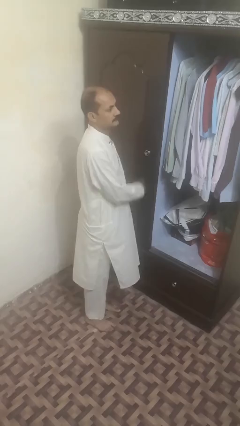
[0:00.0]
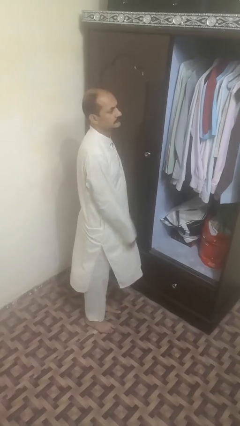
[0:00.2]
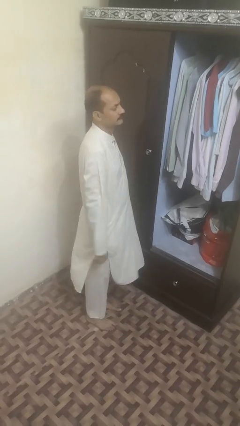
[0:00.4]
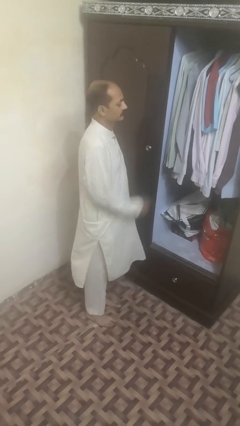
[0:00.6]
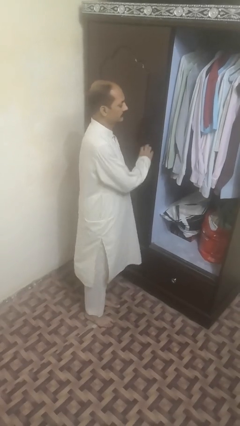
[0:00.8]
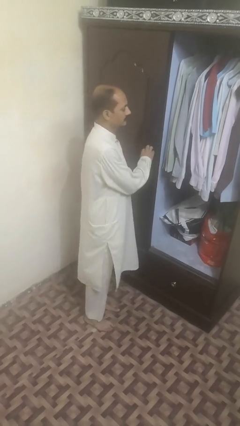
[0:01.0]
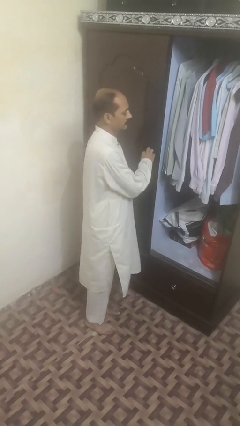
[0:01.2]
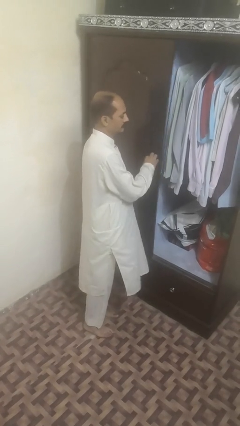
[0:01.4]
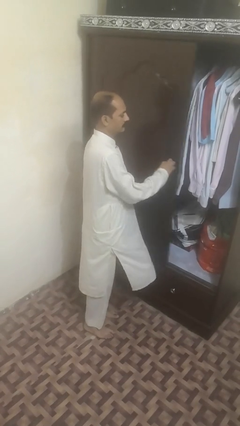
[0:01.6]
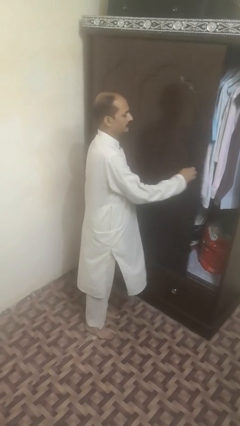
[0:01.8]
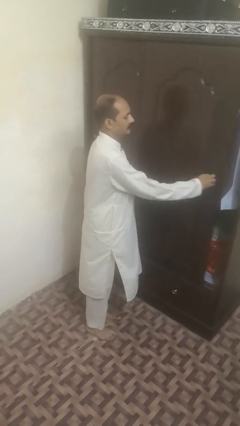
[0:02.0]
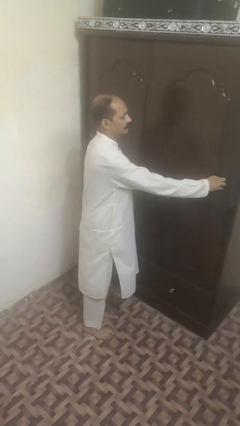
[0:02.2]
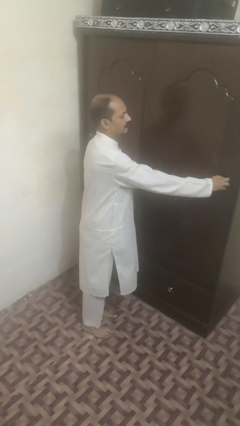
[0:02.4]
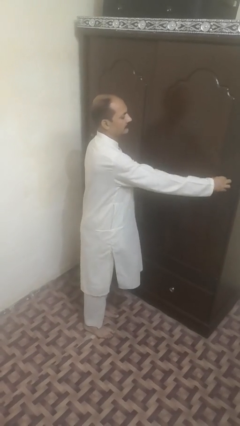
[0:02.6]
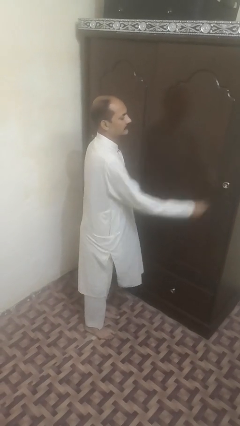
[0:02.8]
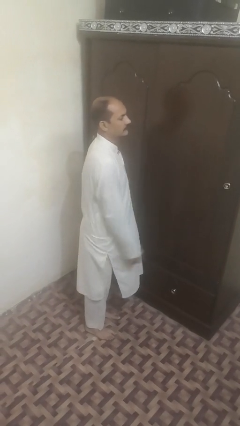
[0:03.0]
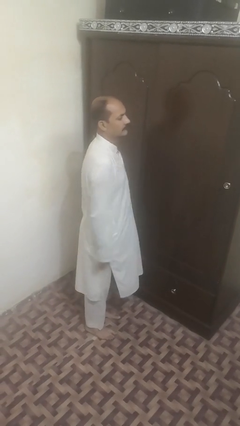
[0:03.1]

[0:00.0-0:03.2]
person closes sliding door

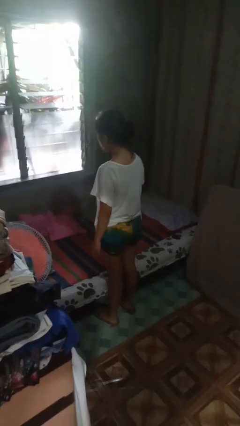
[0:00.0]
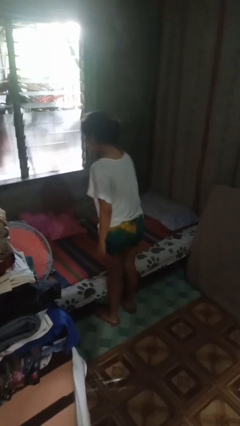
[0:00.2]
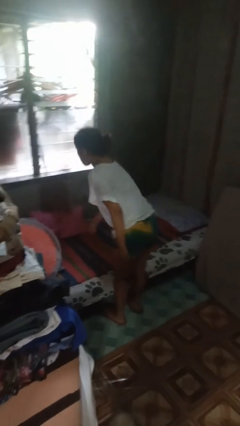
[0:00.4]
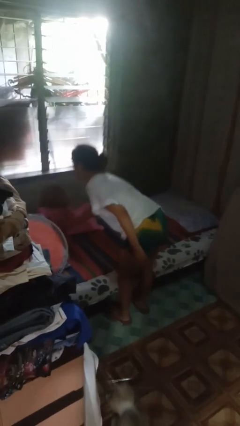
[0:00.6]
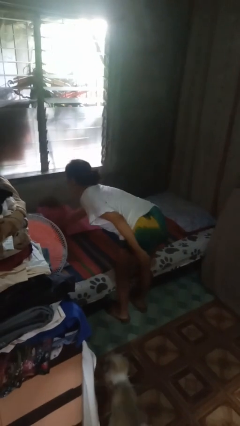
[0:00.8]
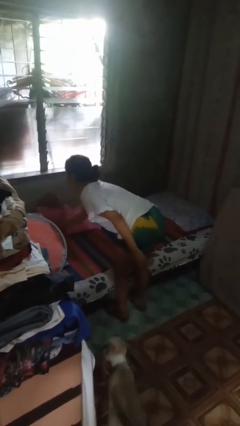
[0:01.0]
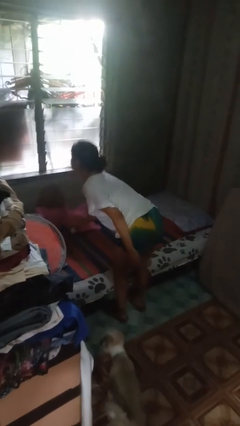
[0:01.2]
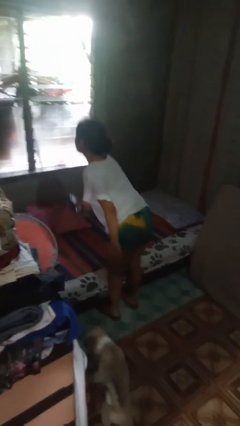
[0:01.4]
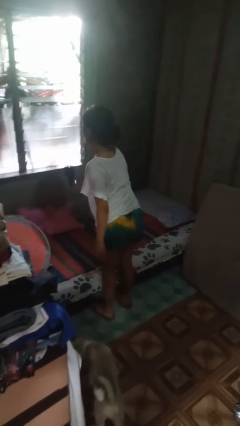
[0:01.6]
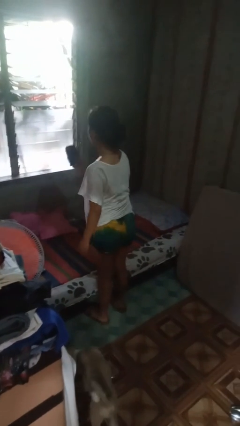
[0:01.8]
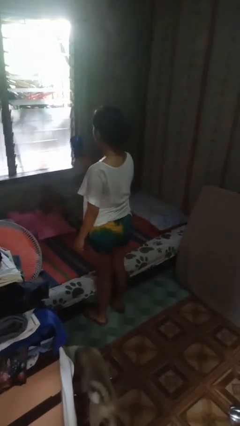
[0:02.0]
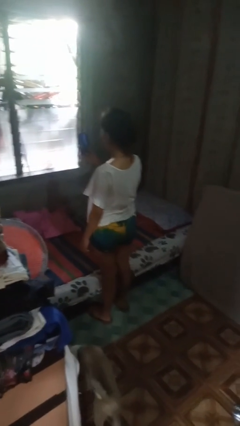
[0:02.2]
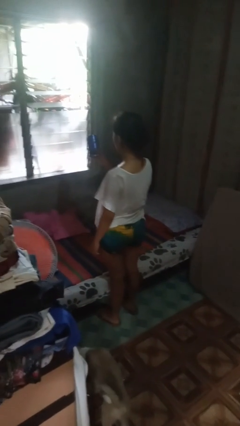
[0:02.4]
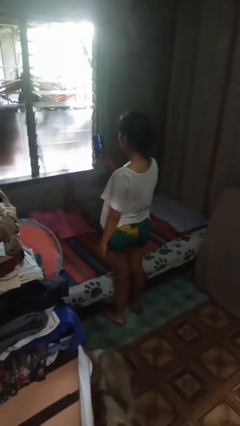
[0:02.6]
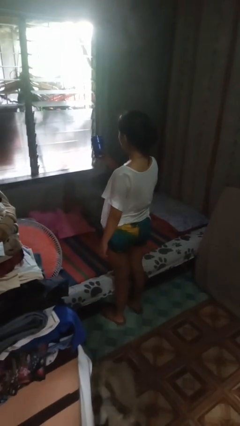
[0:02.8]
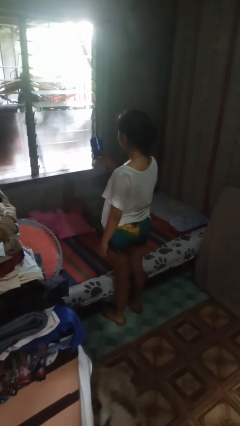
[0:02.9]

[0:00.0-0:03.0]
person picks up object from bed

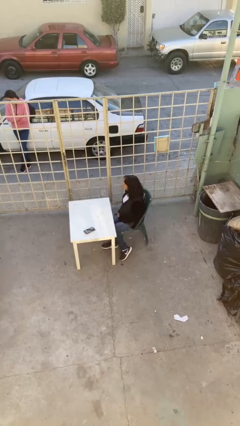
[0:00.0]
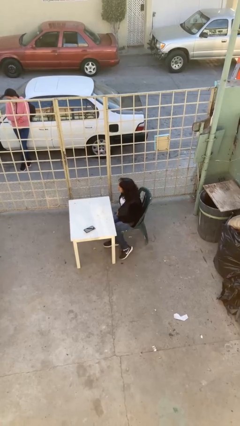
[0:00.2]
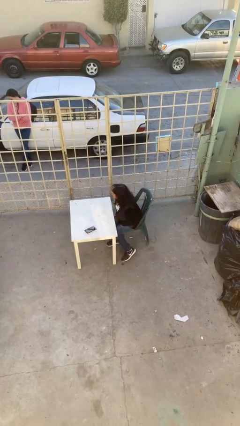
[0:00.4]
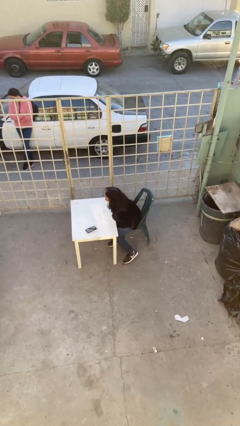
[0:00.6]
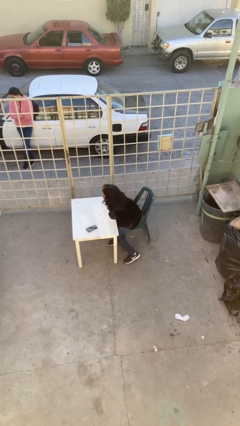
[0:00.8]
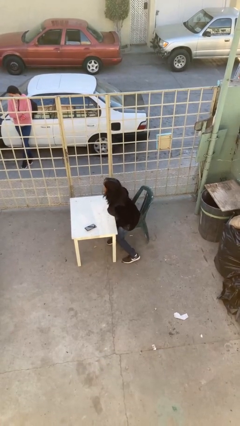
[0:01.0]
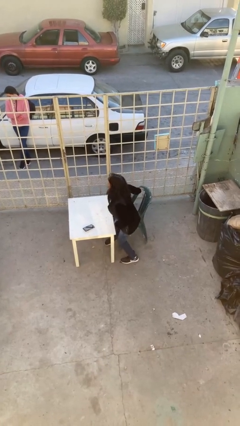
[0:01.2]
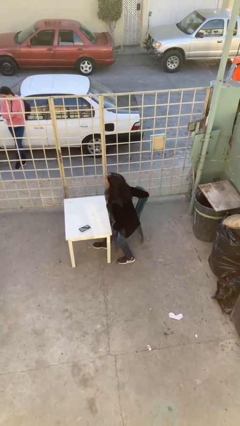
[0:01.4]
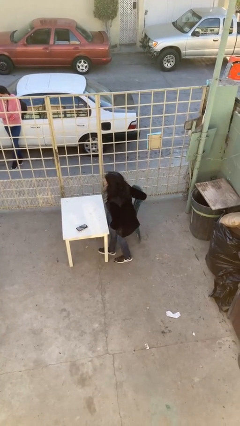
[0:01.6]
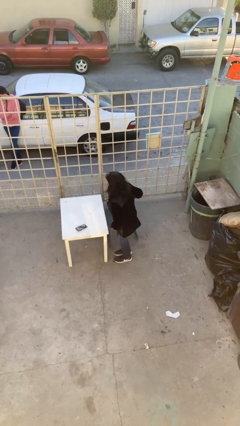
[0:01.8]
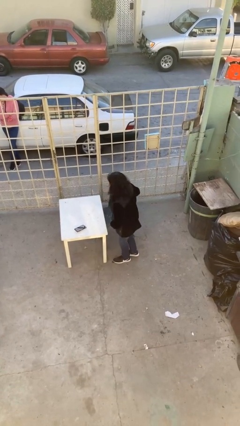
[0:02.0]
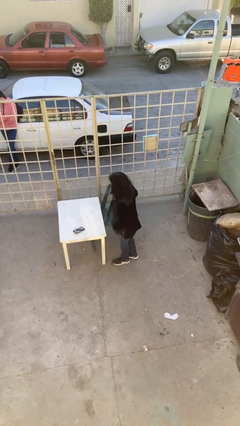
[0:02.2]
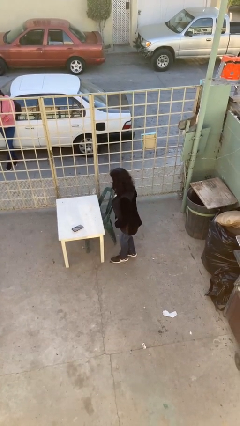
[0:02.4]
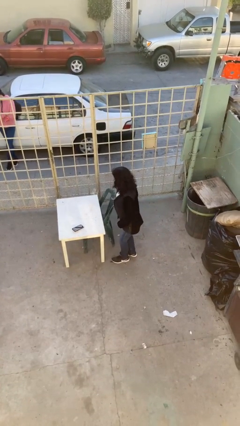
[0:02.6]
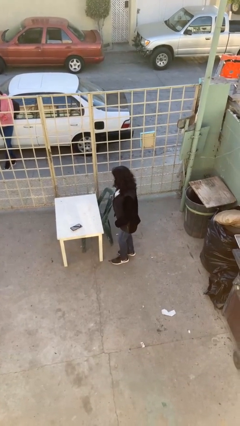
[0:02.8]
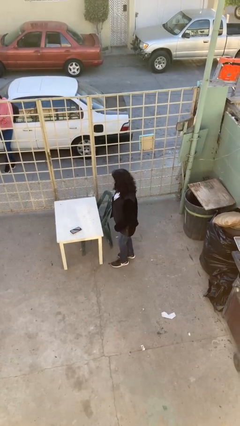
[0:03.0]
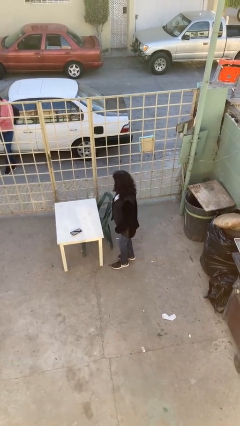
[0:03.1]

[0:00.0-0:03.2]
person stands up

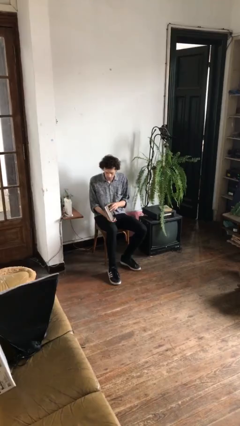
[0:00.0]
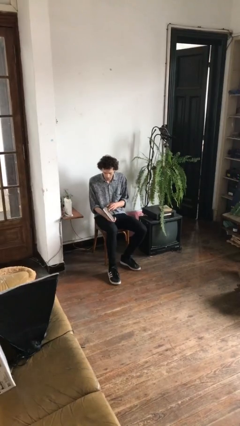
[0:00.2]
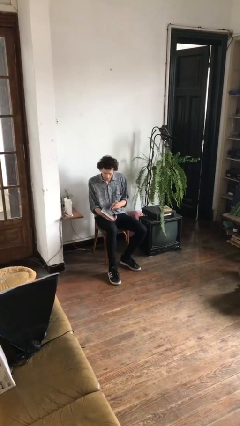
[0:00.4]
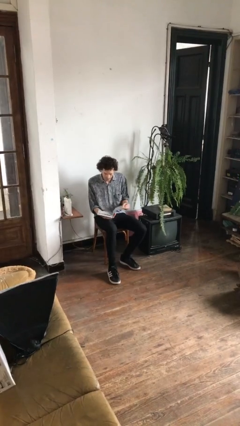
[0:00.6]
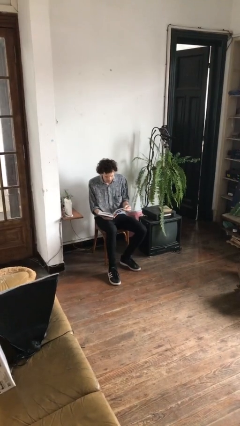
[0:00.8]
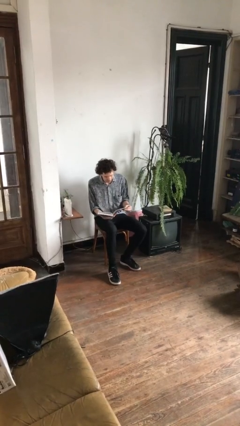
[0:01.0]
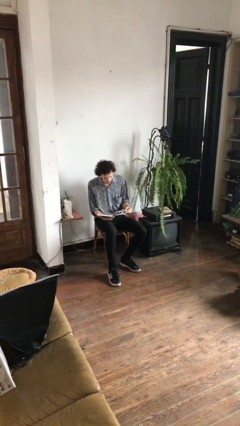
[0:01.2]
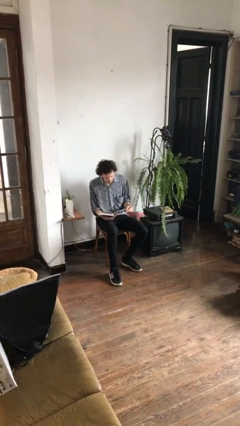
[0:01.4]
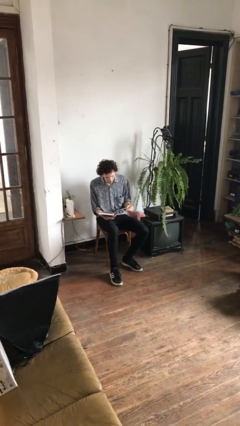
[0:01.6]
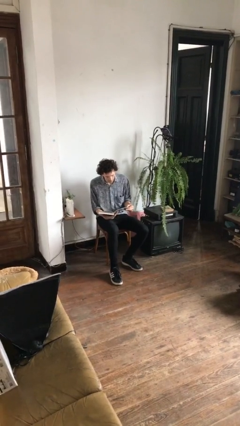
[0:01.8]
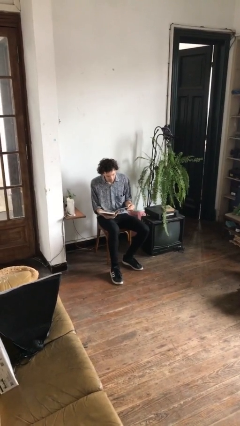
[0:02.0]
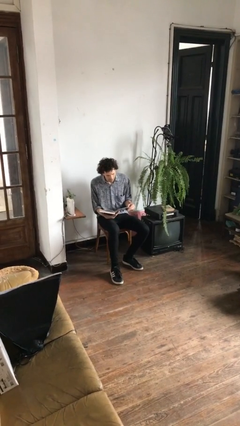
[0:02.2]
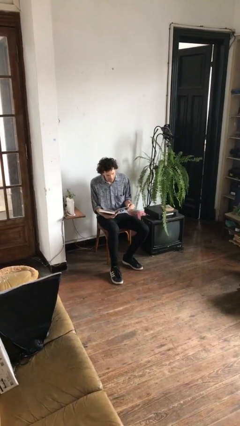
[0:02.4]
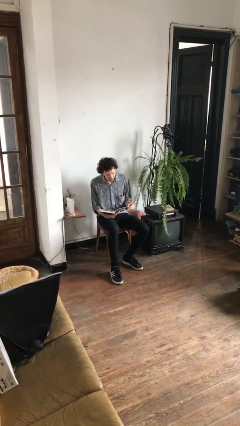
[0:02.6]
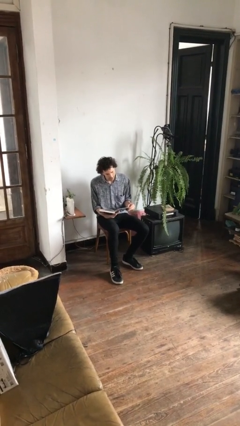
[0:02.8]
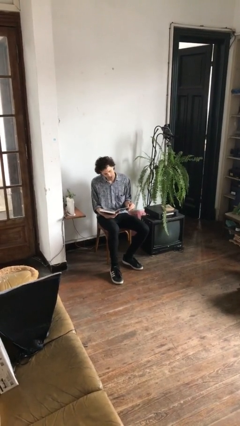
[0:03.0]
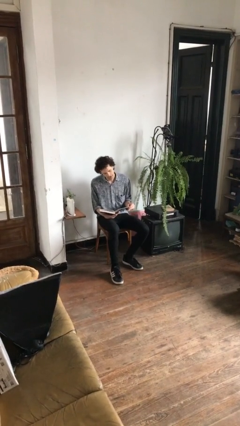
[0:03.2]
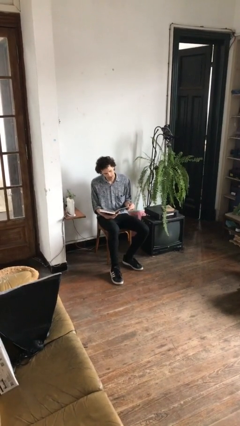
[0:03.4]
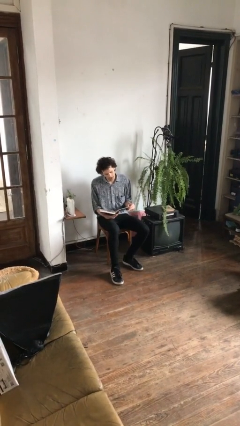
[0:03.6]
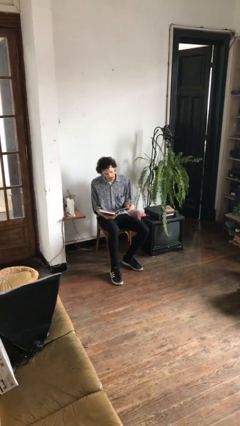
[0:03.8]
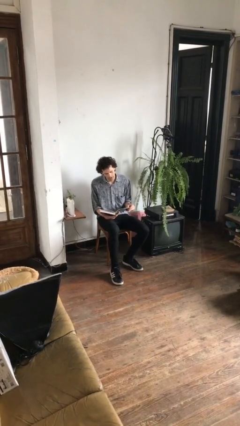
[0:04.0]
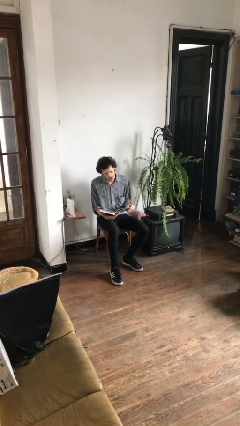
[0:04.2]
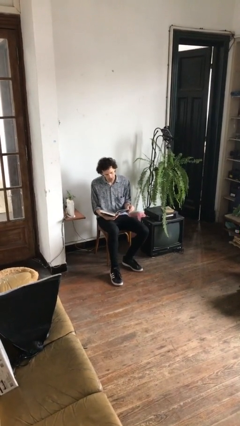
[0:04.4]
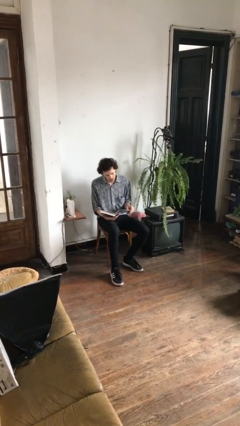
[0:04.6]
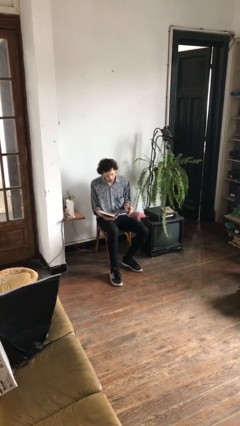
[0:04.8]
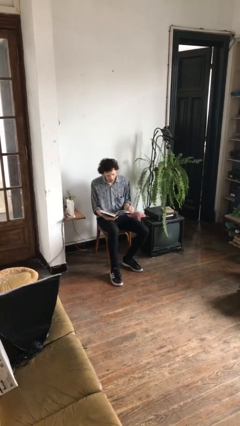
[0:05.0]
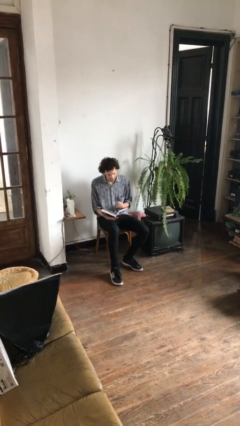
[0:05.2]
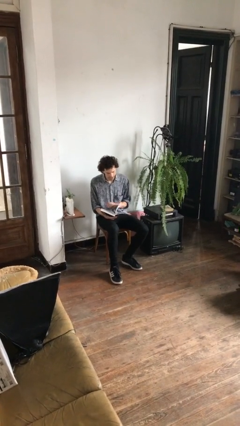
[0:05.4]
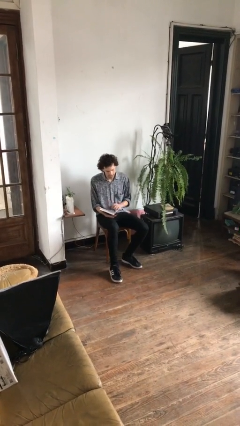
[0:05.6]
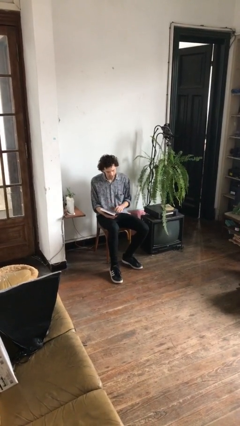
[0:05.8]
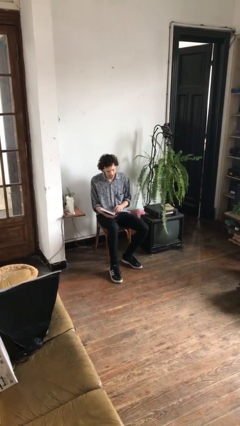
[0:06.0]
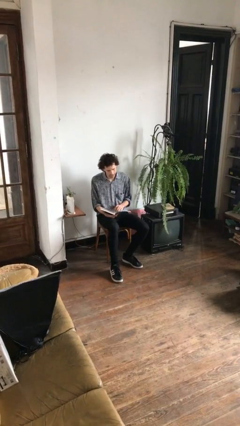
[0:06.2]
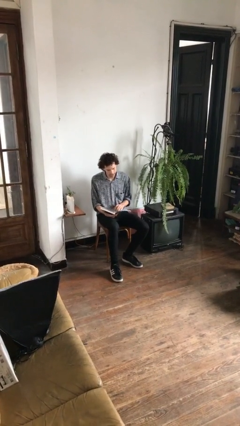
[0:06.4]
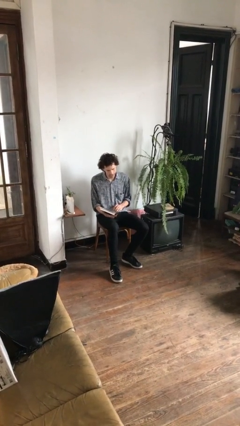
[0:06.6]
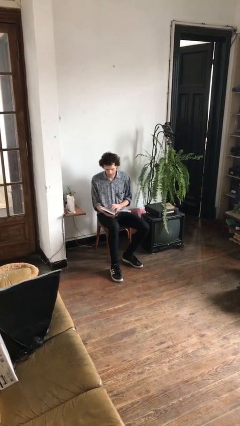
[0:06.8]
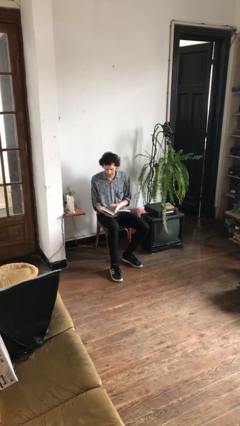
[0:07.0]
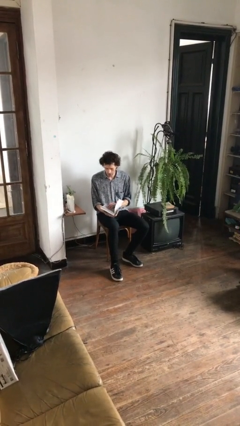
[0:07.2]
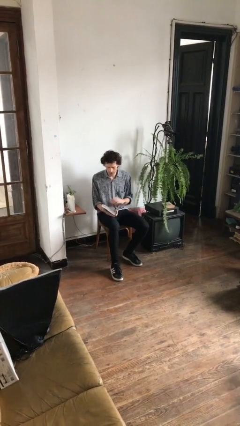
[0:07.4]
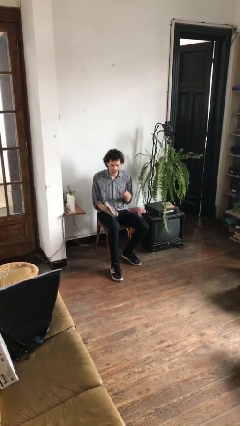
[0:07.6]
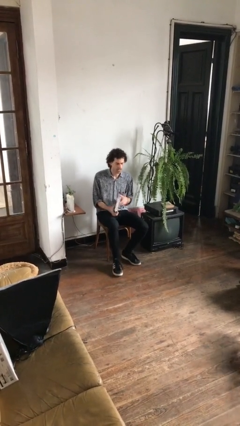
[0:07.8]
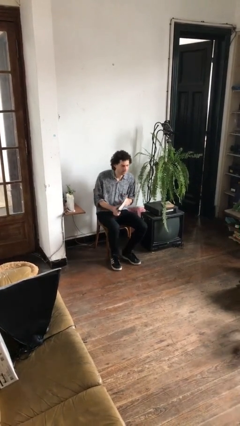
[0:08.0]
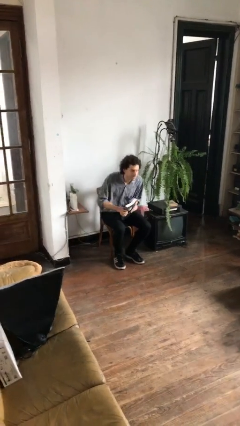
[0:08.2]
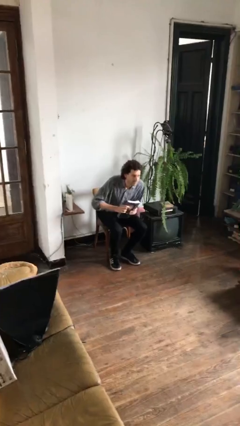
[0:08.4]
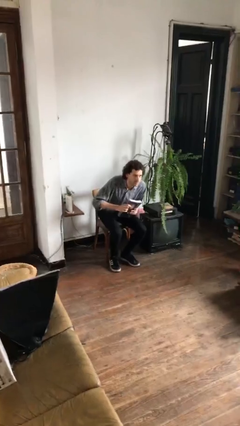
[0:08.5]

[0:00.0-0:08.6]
person reads document
